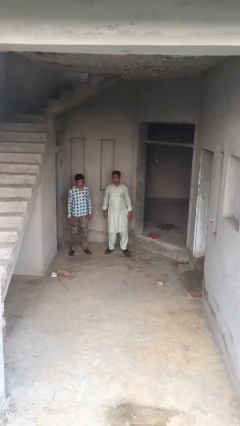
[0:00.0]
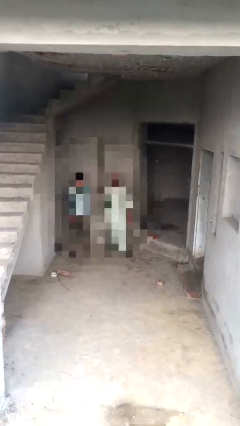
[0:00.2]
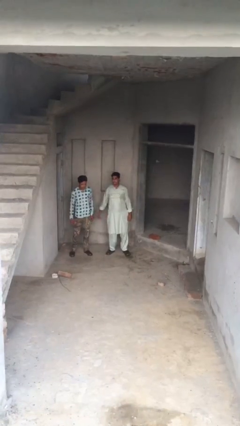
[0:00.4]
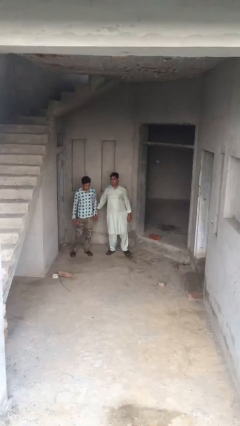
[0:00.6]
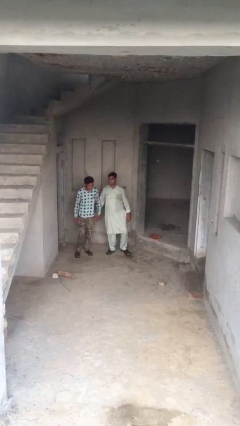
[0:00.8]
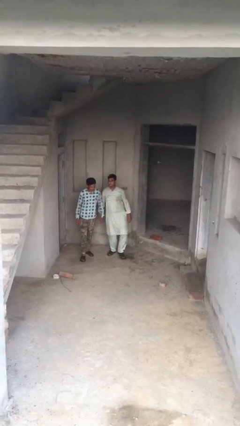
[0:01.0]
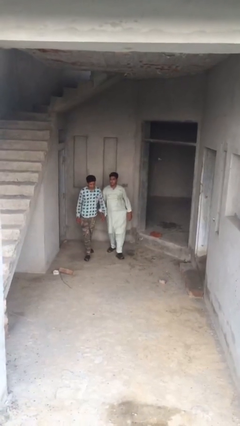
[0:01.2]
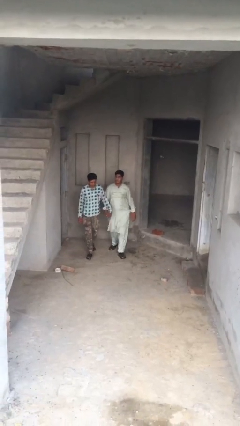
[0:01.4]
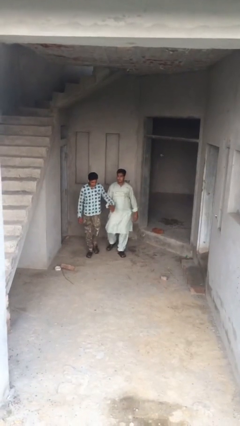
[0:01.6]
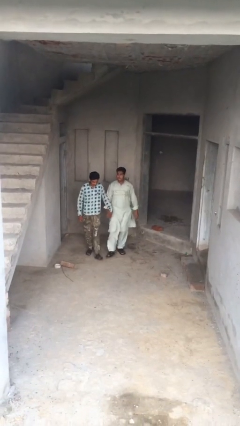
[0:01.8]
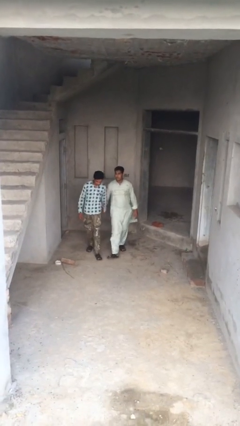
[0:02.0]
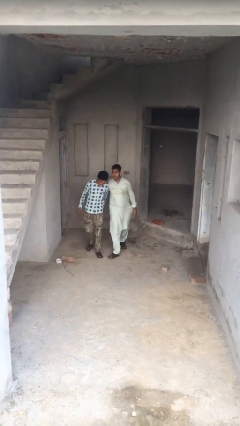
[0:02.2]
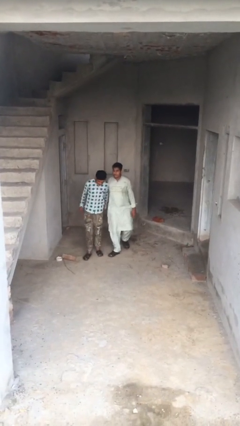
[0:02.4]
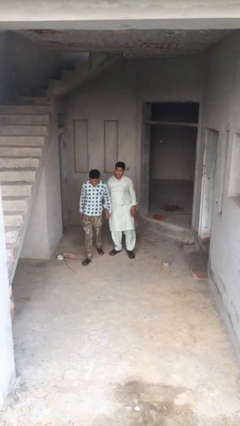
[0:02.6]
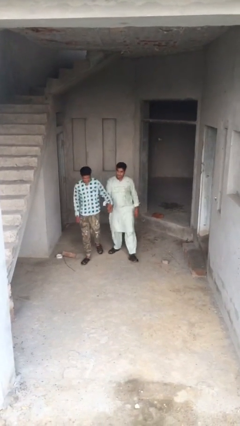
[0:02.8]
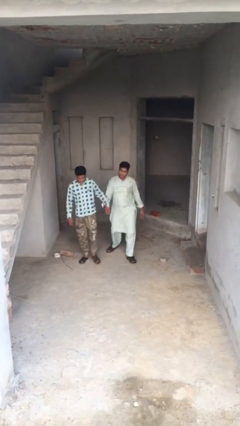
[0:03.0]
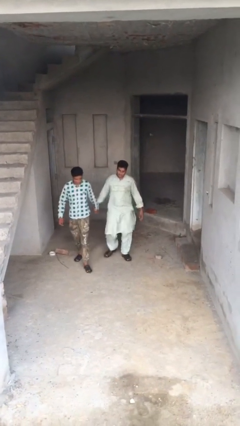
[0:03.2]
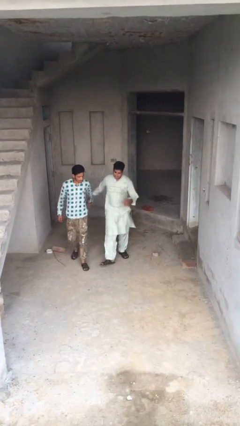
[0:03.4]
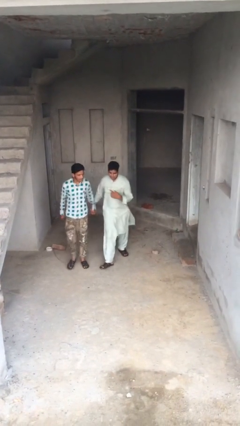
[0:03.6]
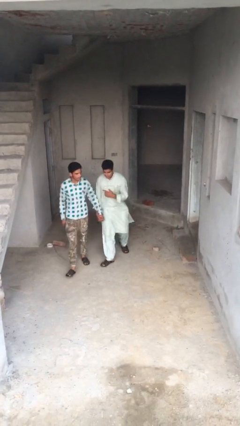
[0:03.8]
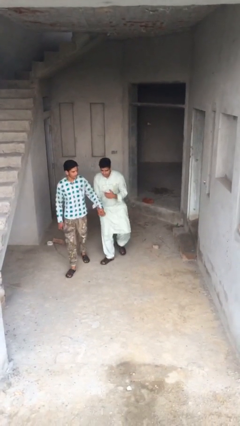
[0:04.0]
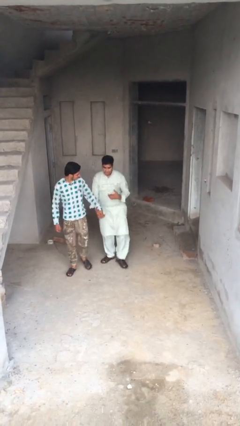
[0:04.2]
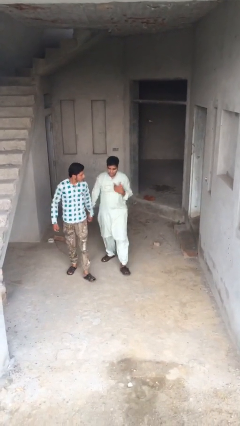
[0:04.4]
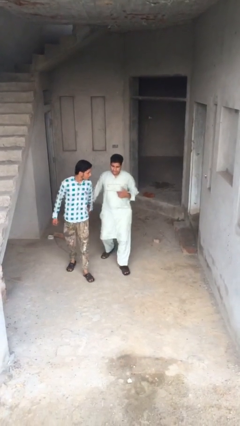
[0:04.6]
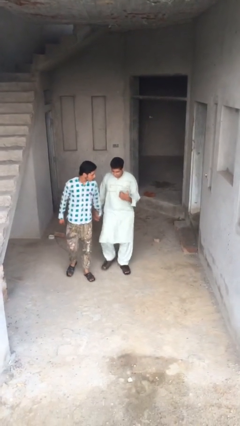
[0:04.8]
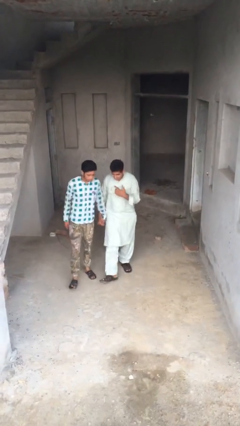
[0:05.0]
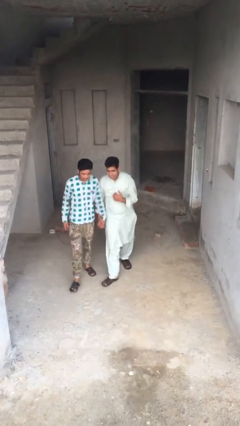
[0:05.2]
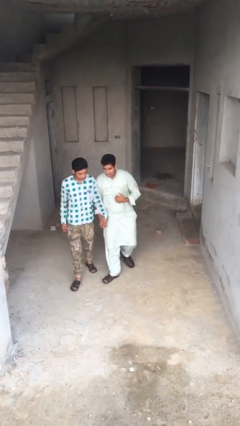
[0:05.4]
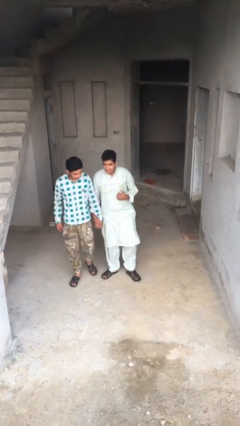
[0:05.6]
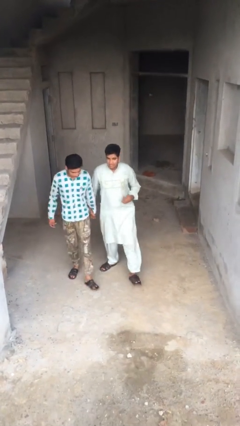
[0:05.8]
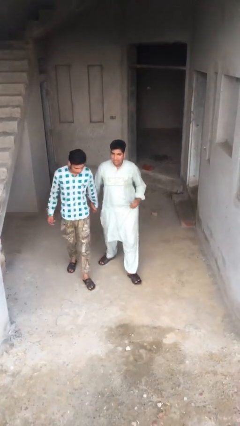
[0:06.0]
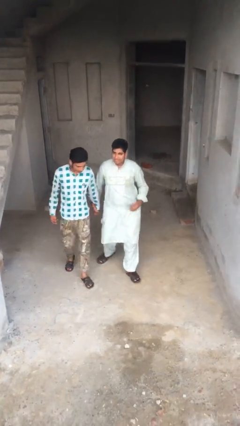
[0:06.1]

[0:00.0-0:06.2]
person holds hand

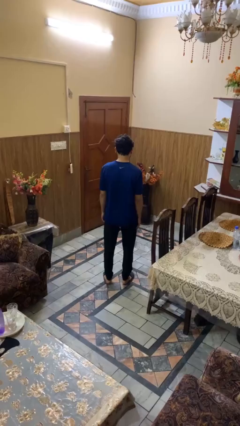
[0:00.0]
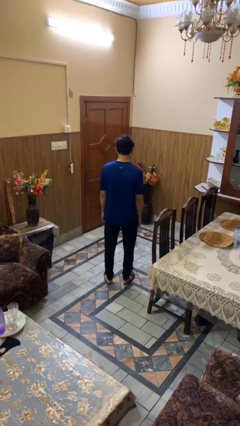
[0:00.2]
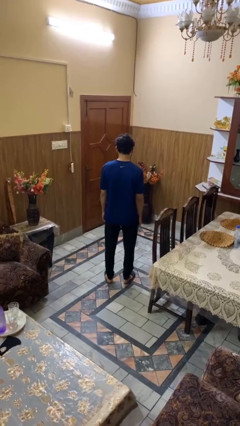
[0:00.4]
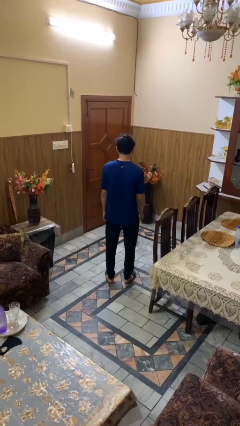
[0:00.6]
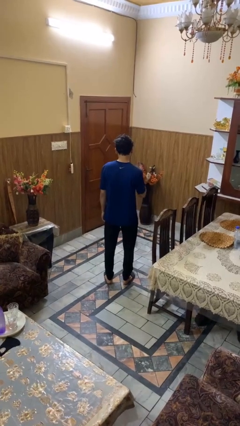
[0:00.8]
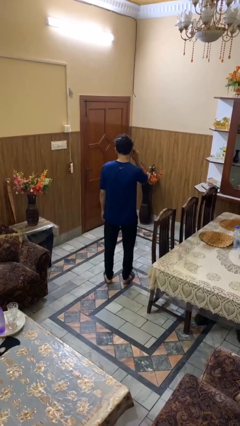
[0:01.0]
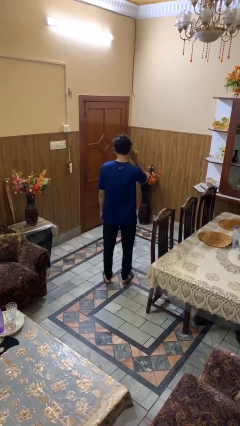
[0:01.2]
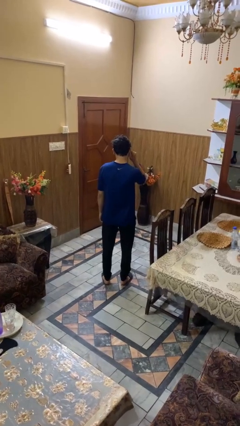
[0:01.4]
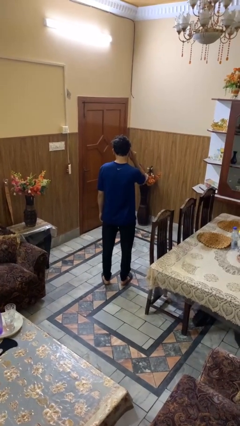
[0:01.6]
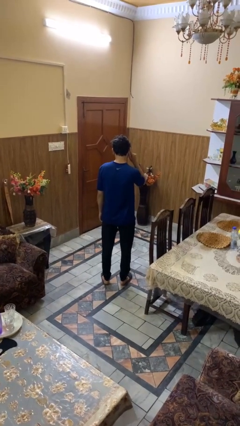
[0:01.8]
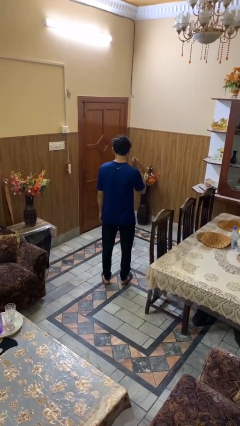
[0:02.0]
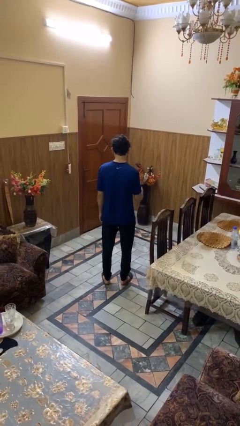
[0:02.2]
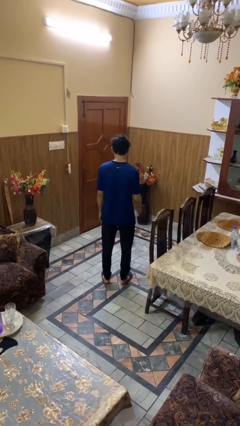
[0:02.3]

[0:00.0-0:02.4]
person touches earlobe

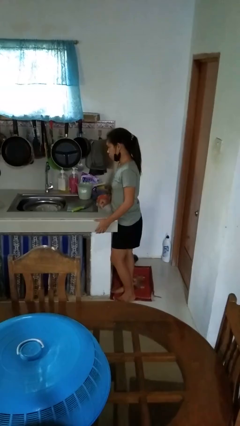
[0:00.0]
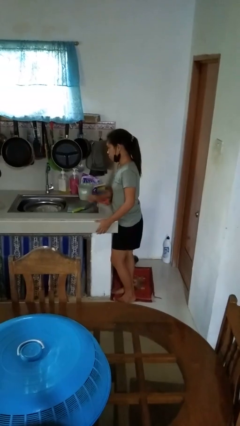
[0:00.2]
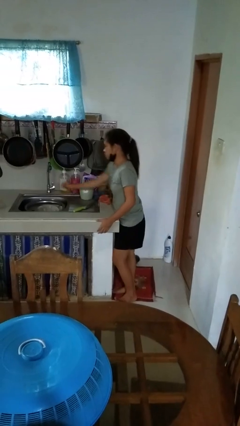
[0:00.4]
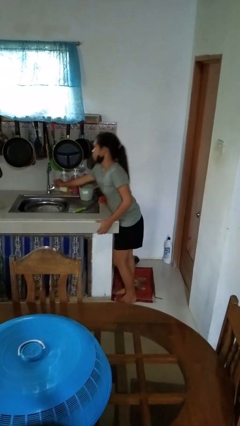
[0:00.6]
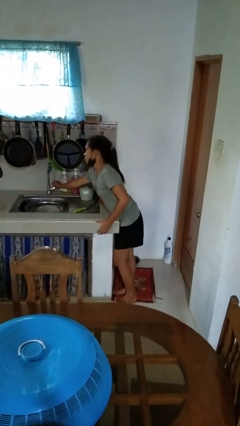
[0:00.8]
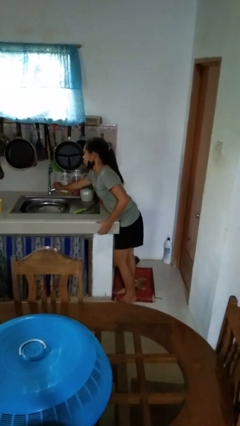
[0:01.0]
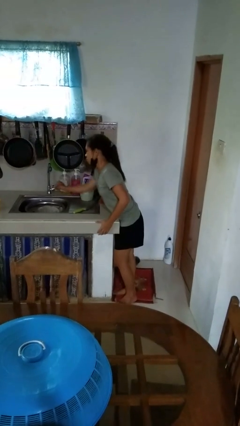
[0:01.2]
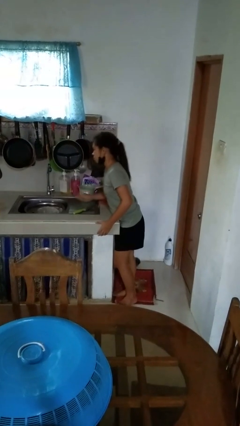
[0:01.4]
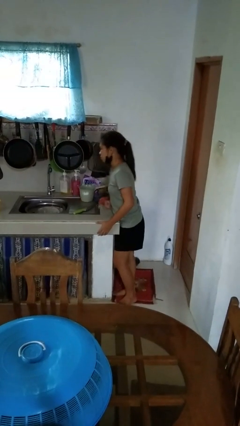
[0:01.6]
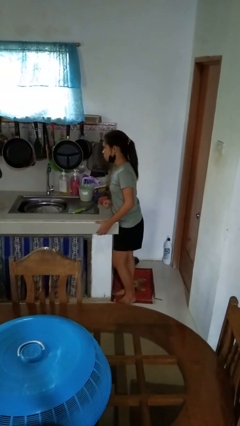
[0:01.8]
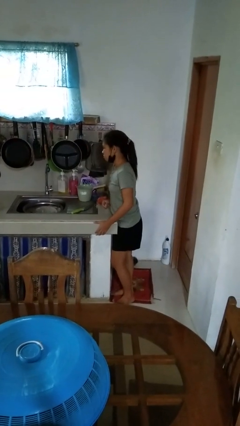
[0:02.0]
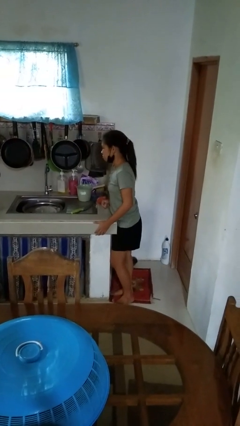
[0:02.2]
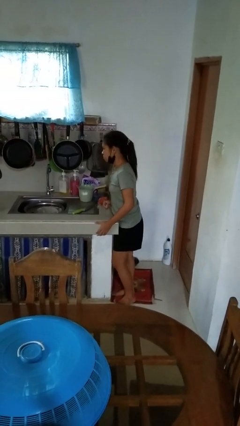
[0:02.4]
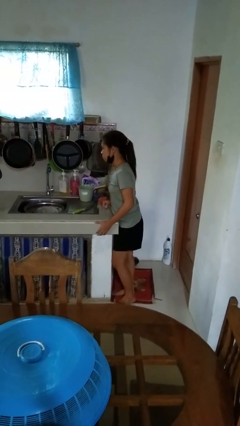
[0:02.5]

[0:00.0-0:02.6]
person turns on faucet

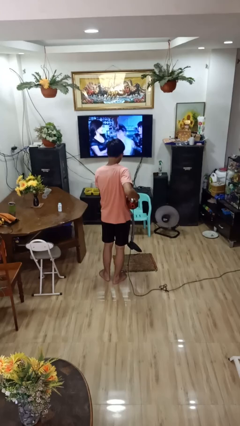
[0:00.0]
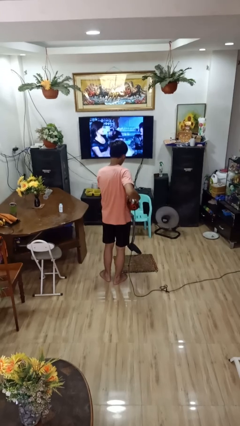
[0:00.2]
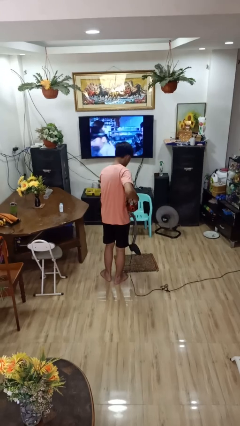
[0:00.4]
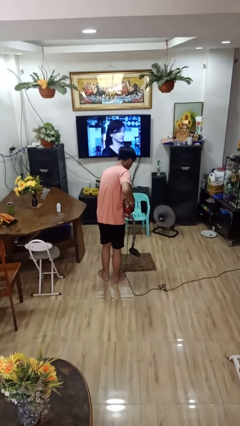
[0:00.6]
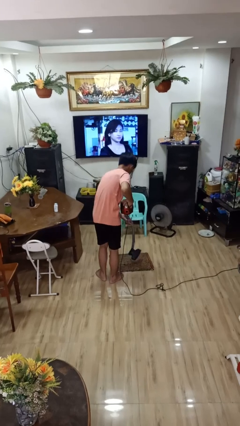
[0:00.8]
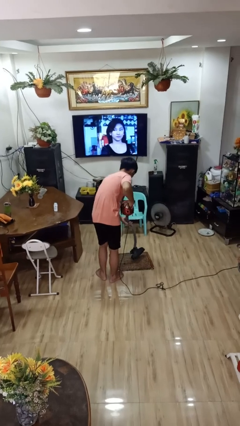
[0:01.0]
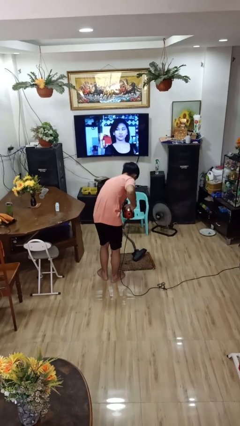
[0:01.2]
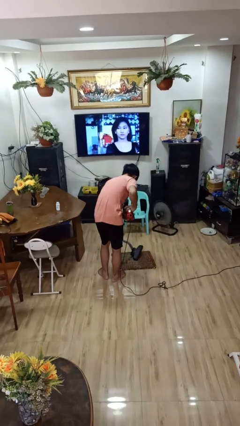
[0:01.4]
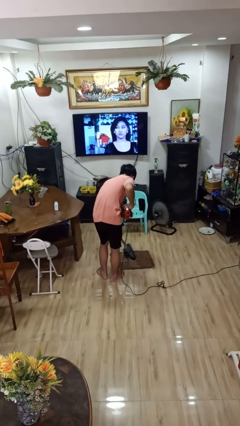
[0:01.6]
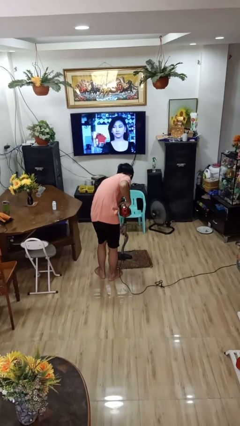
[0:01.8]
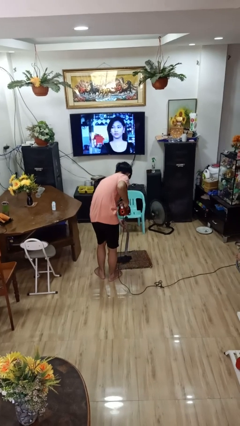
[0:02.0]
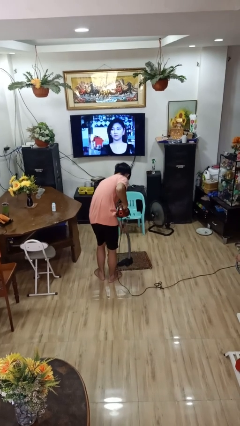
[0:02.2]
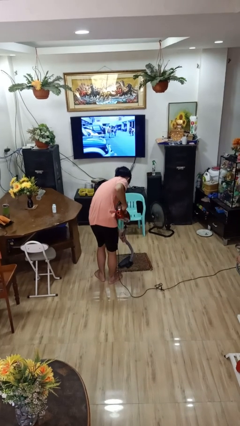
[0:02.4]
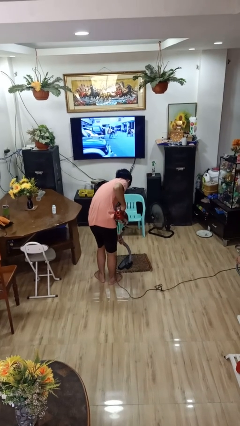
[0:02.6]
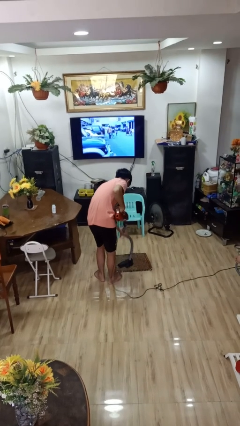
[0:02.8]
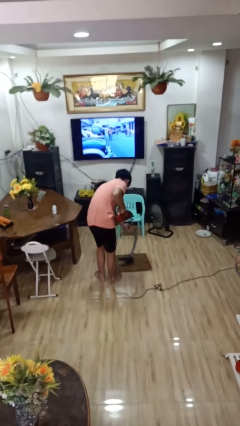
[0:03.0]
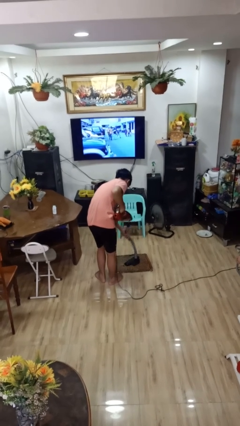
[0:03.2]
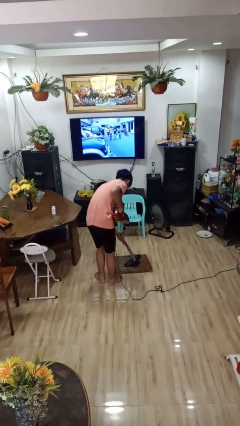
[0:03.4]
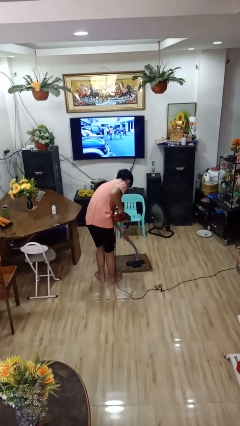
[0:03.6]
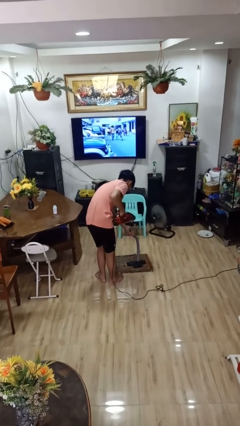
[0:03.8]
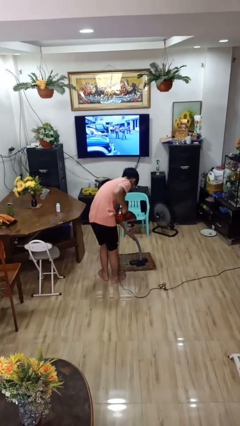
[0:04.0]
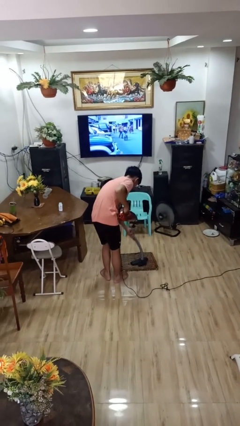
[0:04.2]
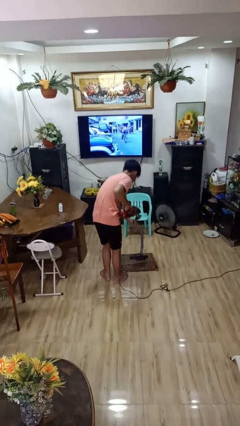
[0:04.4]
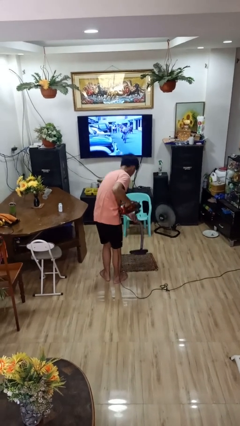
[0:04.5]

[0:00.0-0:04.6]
person vacuums carpet

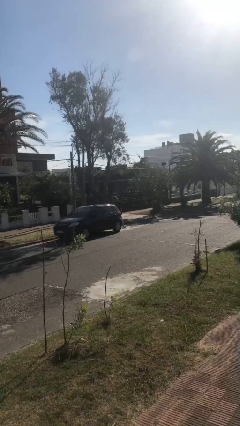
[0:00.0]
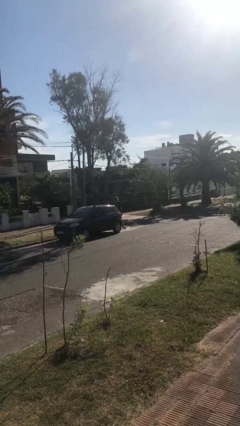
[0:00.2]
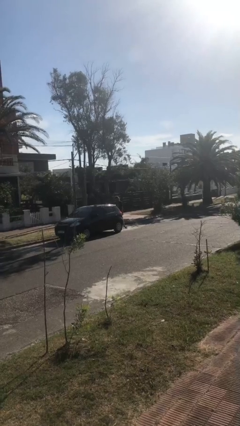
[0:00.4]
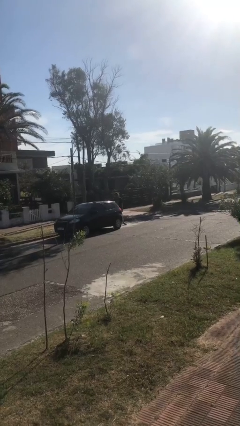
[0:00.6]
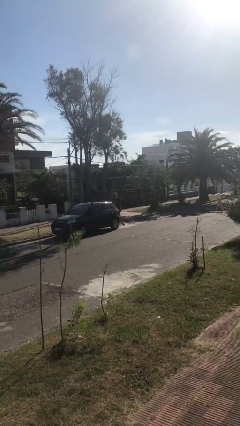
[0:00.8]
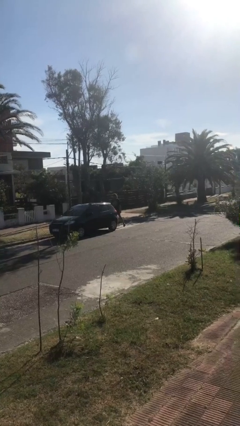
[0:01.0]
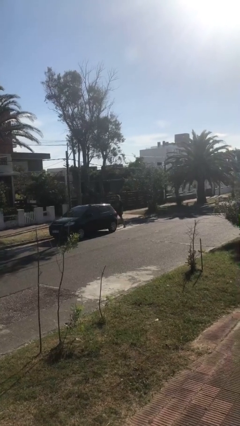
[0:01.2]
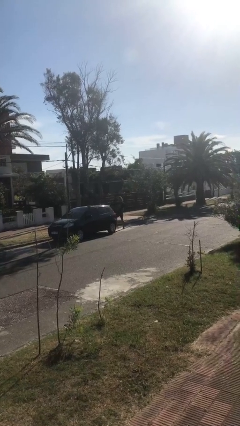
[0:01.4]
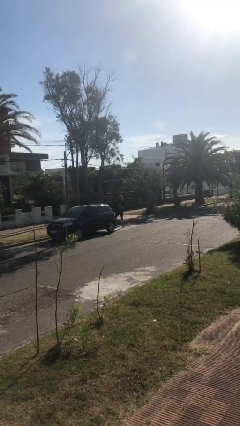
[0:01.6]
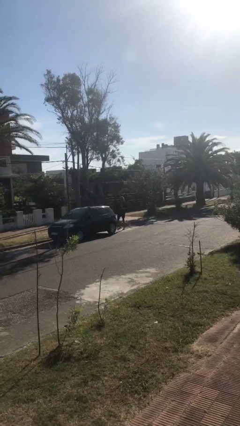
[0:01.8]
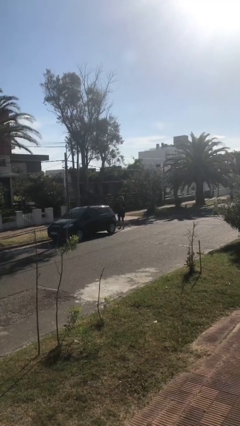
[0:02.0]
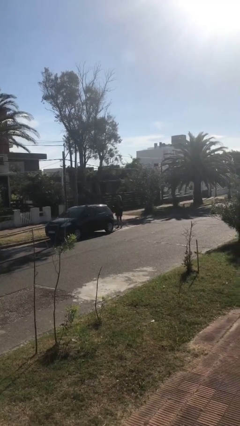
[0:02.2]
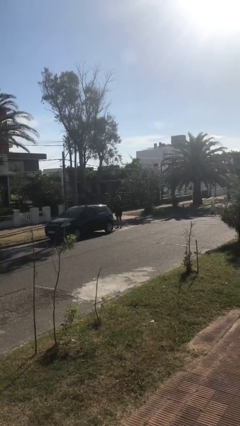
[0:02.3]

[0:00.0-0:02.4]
person unloads car
